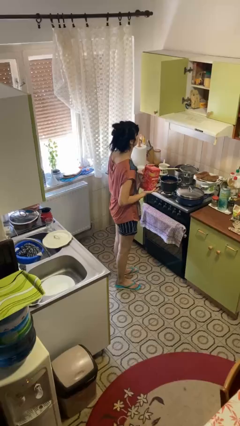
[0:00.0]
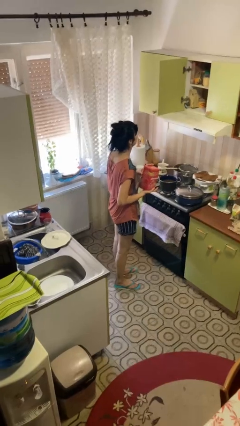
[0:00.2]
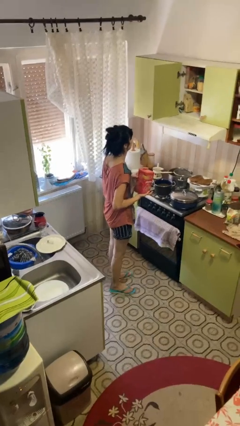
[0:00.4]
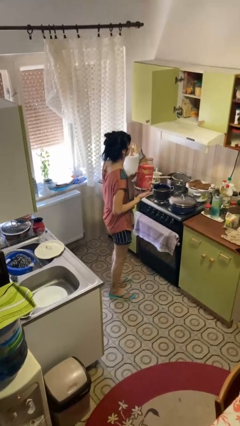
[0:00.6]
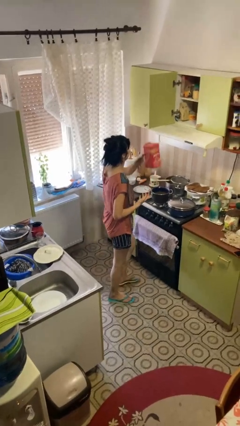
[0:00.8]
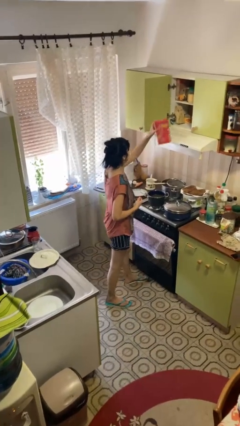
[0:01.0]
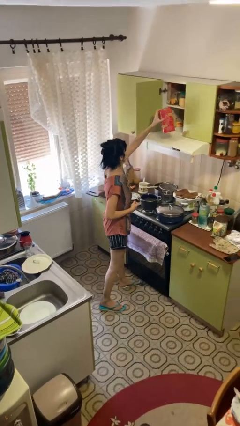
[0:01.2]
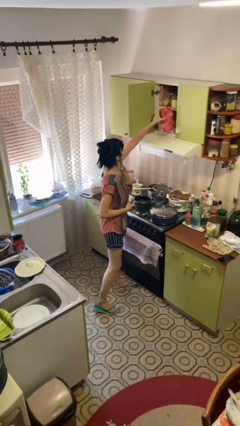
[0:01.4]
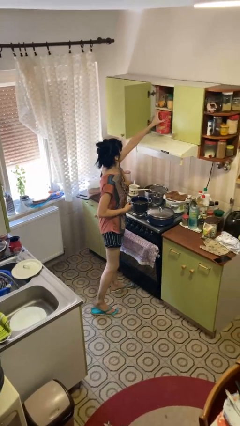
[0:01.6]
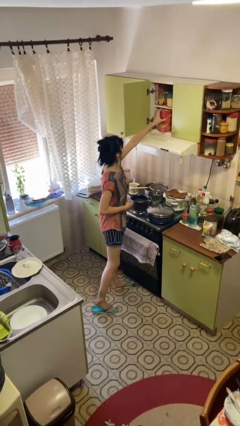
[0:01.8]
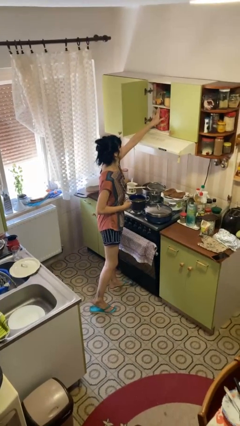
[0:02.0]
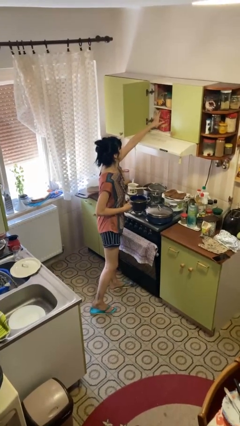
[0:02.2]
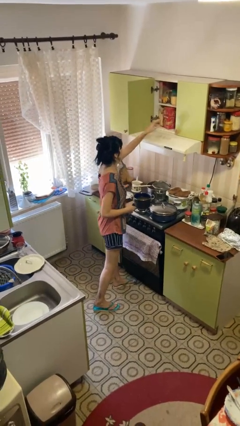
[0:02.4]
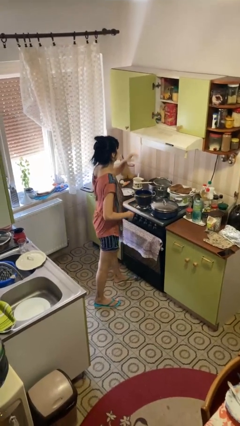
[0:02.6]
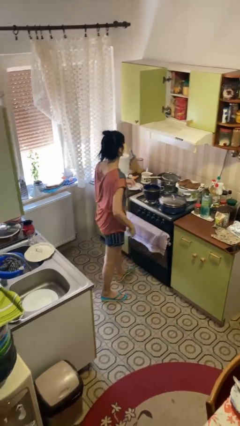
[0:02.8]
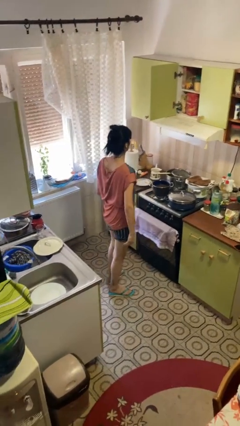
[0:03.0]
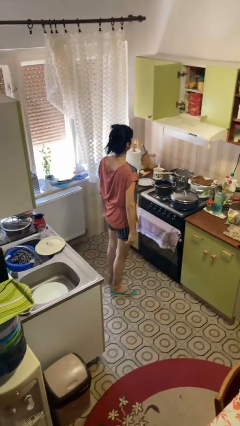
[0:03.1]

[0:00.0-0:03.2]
person puts down object into cabinet

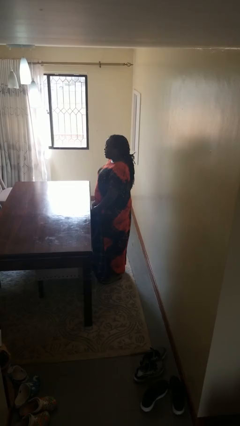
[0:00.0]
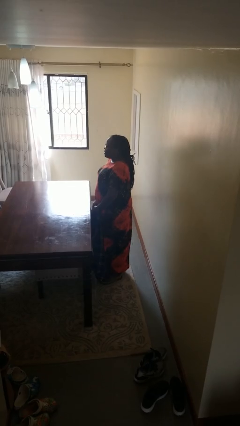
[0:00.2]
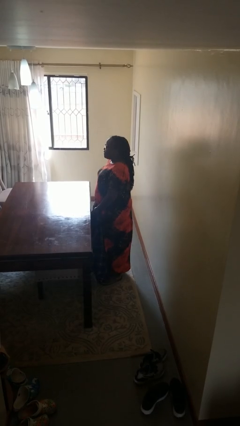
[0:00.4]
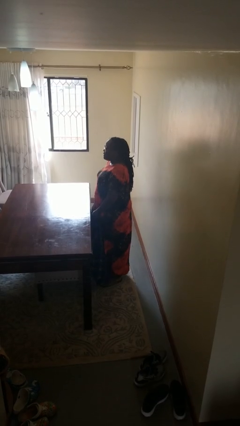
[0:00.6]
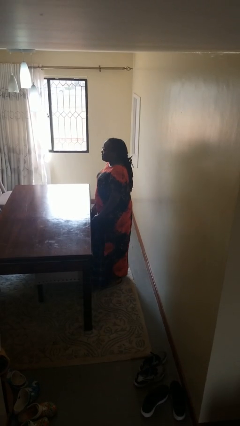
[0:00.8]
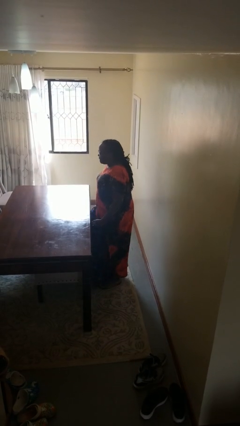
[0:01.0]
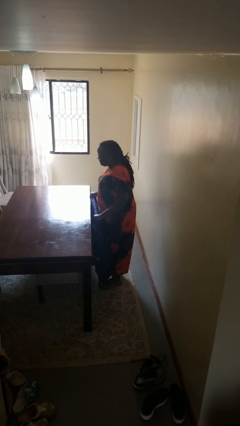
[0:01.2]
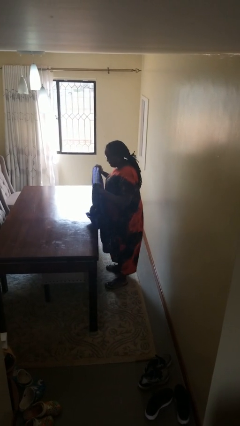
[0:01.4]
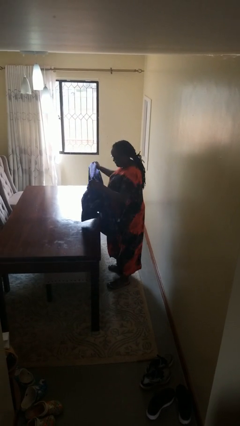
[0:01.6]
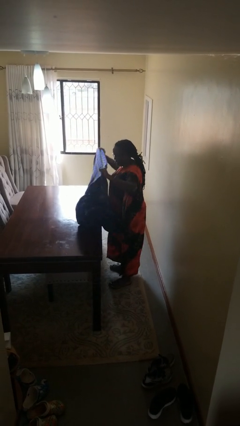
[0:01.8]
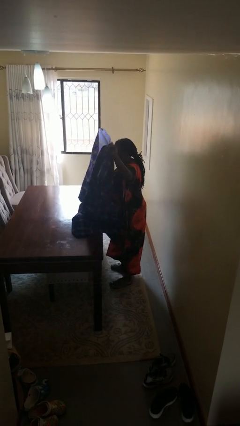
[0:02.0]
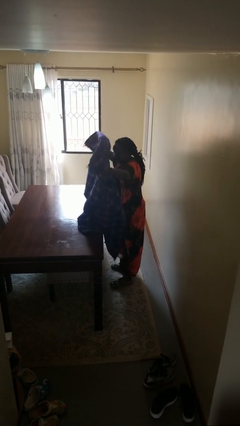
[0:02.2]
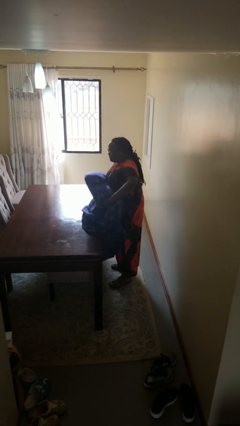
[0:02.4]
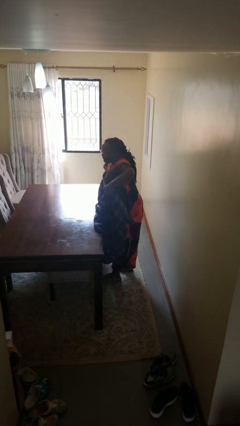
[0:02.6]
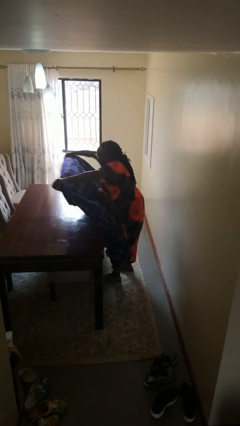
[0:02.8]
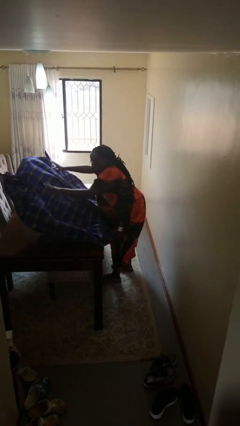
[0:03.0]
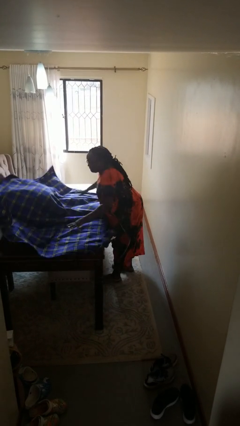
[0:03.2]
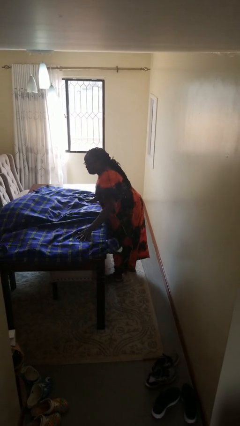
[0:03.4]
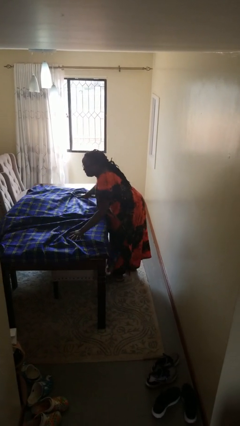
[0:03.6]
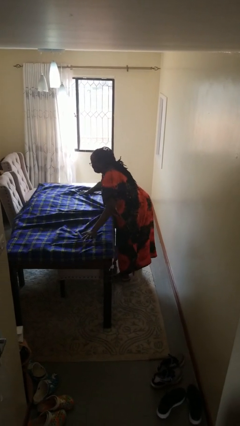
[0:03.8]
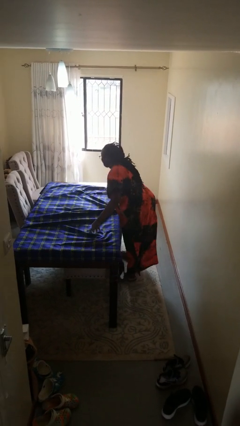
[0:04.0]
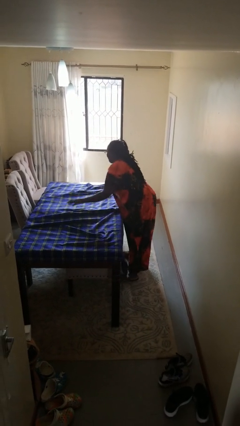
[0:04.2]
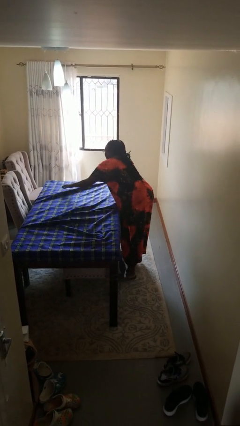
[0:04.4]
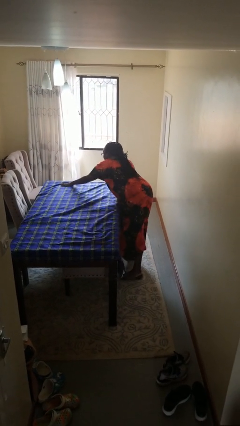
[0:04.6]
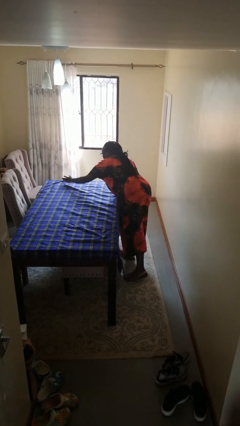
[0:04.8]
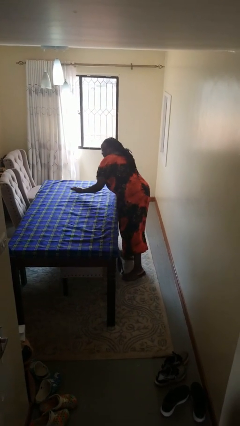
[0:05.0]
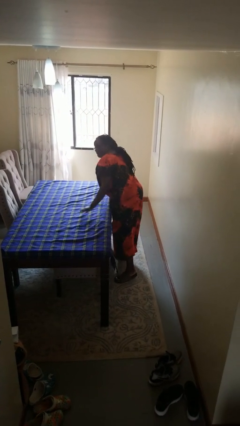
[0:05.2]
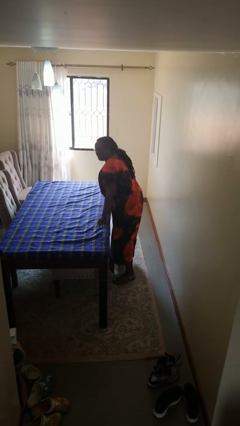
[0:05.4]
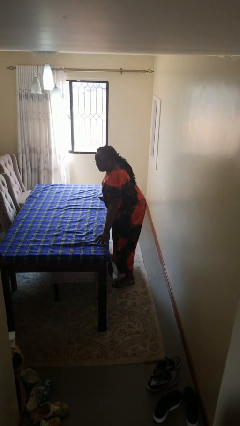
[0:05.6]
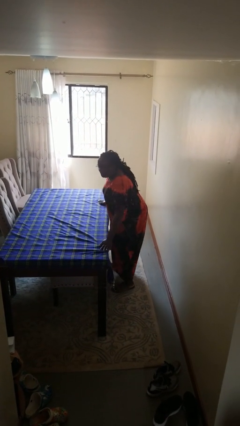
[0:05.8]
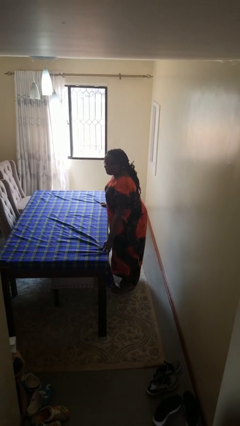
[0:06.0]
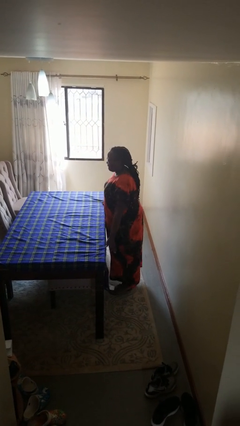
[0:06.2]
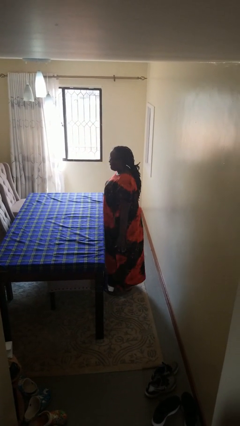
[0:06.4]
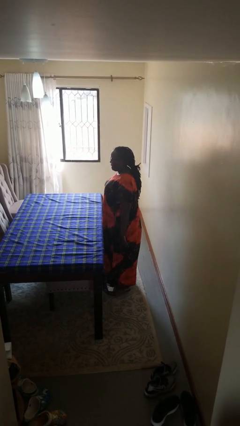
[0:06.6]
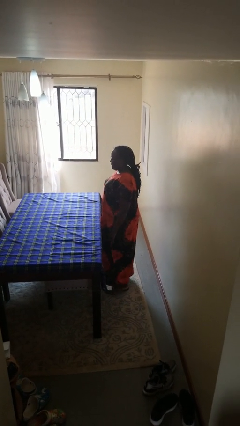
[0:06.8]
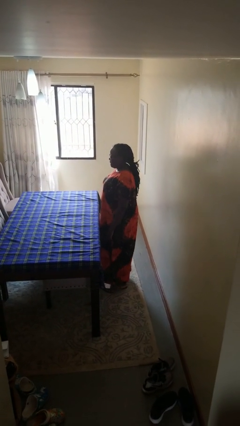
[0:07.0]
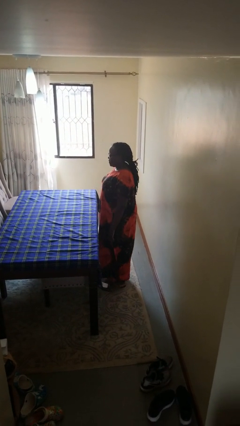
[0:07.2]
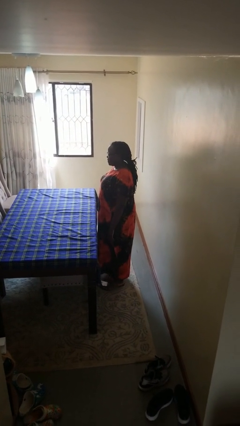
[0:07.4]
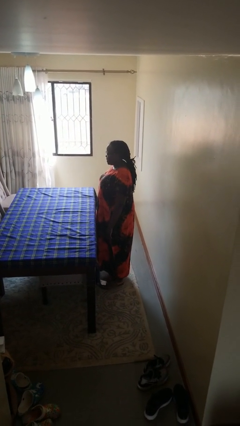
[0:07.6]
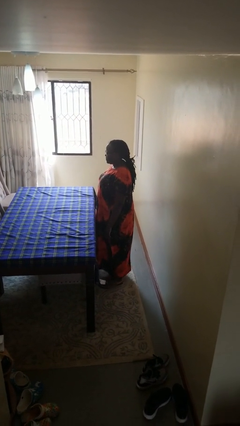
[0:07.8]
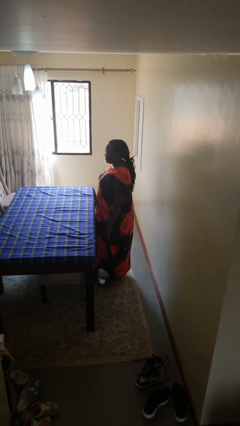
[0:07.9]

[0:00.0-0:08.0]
person spreads tablecloth

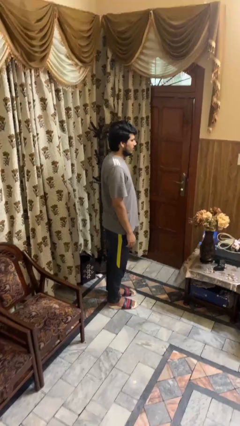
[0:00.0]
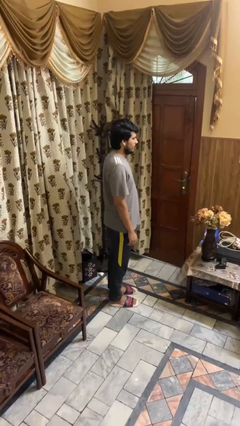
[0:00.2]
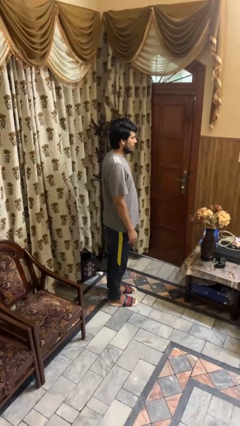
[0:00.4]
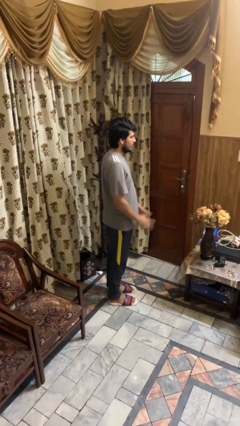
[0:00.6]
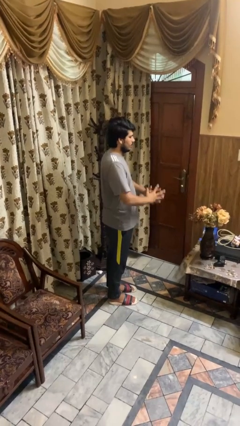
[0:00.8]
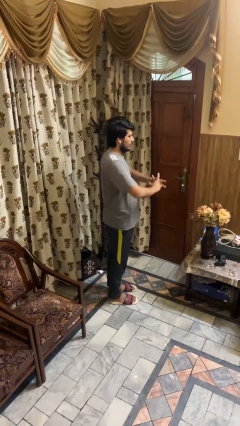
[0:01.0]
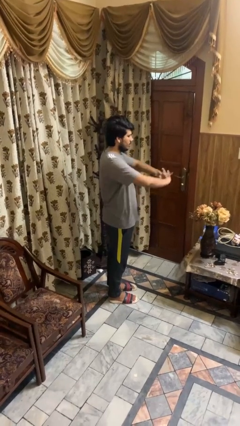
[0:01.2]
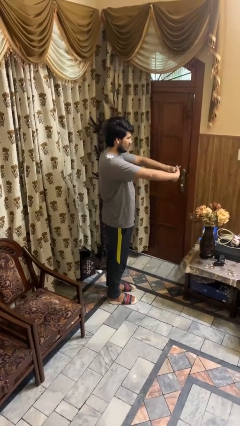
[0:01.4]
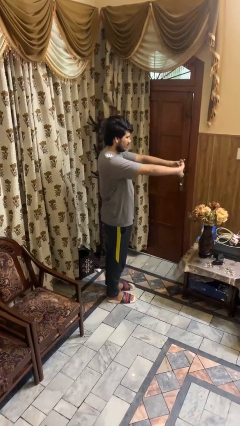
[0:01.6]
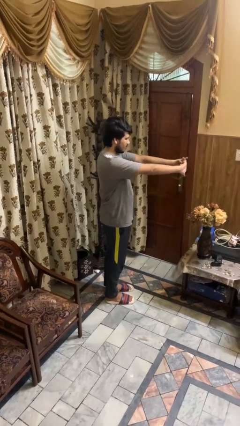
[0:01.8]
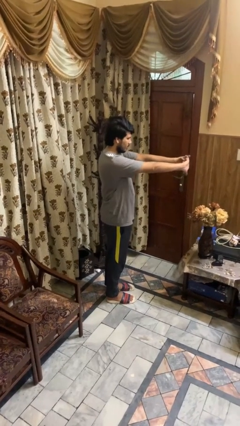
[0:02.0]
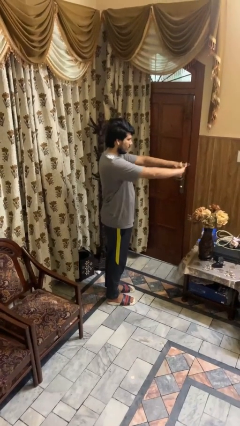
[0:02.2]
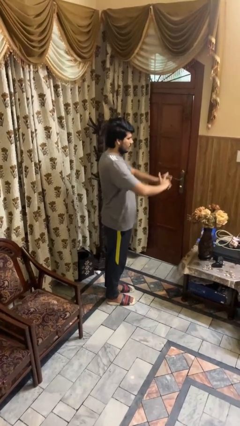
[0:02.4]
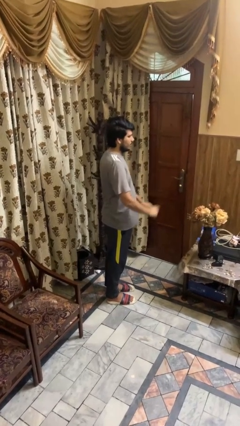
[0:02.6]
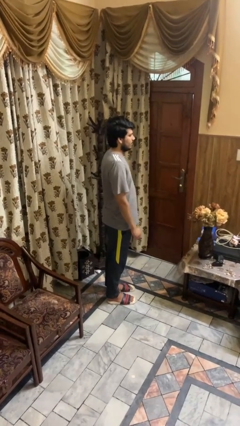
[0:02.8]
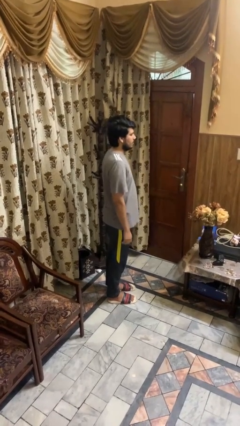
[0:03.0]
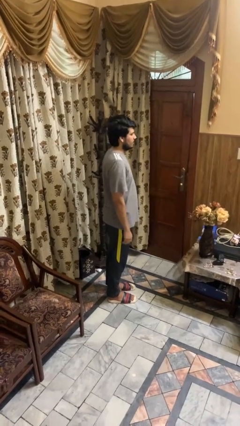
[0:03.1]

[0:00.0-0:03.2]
person cracks knuckles

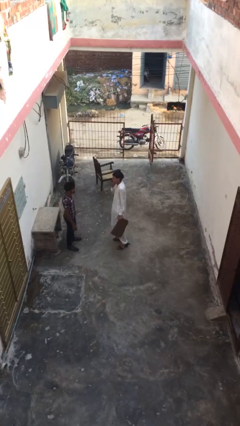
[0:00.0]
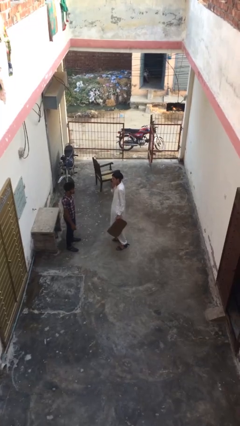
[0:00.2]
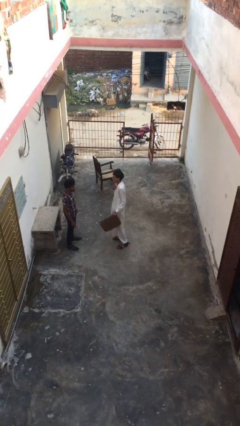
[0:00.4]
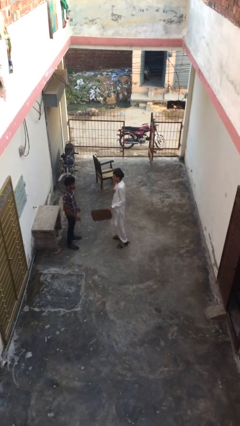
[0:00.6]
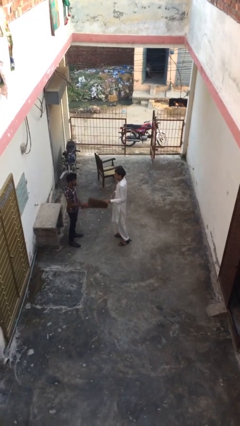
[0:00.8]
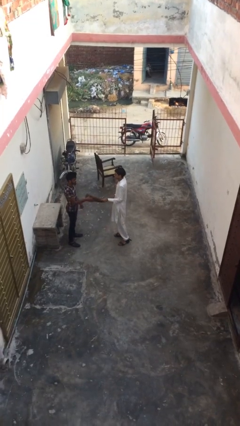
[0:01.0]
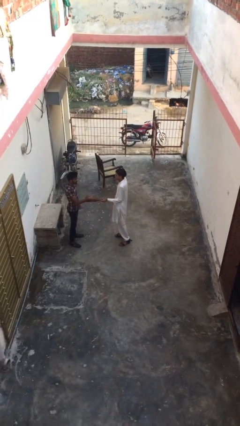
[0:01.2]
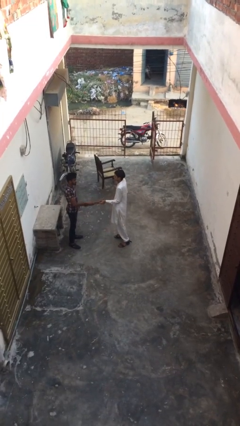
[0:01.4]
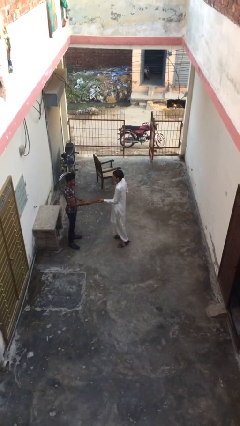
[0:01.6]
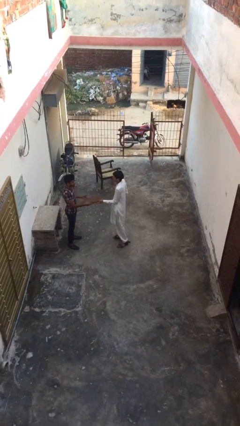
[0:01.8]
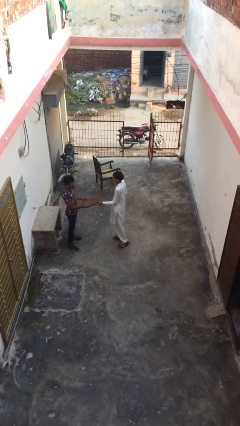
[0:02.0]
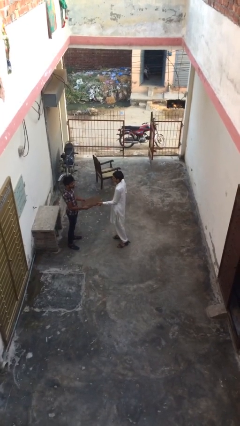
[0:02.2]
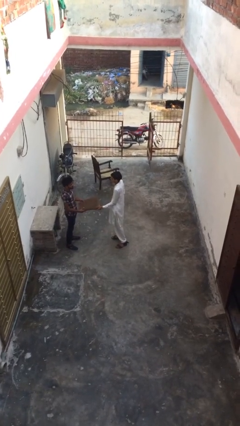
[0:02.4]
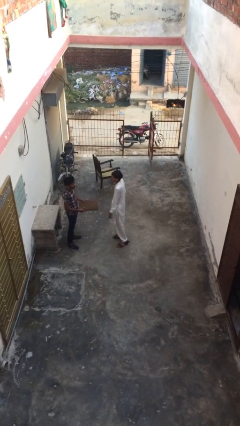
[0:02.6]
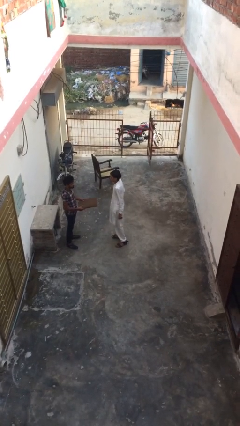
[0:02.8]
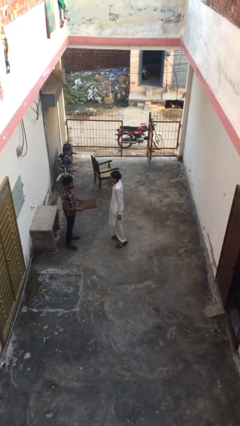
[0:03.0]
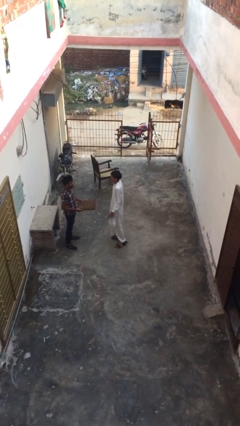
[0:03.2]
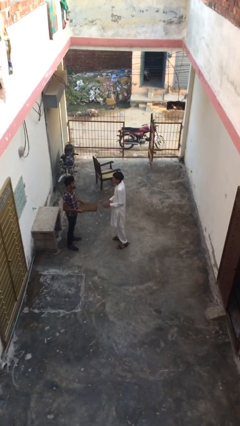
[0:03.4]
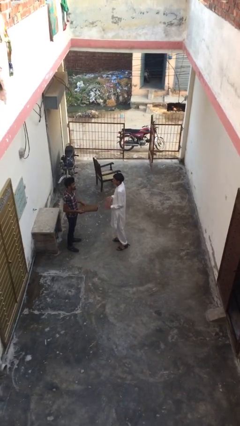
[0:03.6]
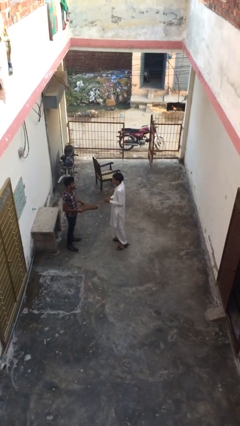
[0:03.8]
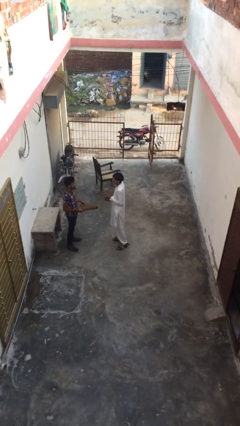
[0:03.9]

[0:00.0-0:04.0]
person transfers object to person
